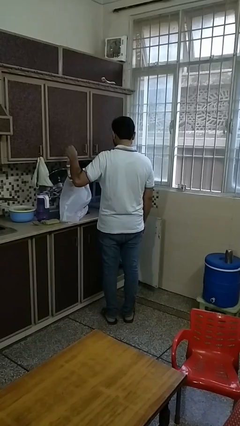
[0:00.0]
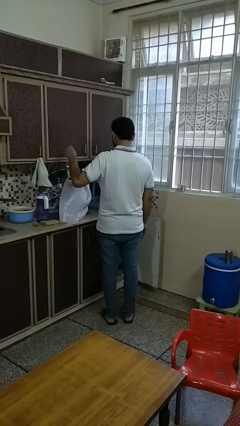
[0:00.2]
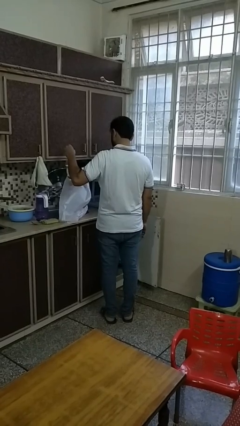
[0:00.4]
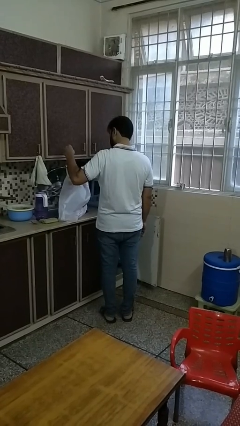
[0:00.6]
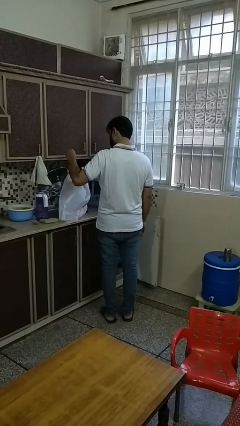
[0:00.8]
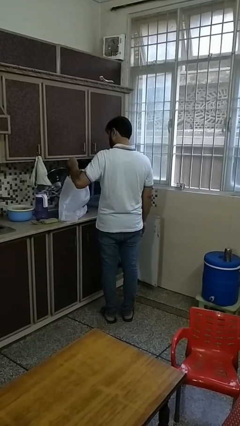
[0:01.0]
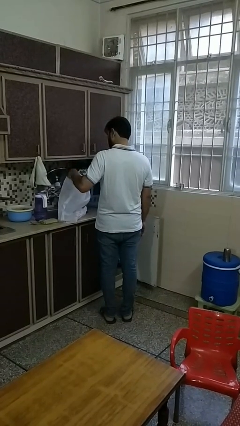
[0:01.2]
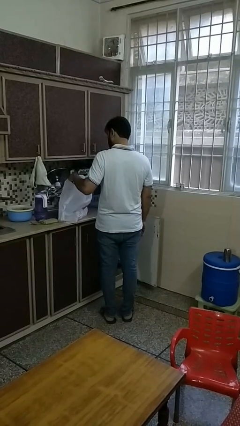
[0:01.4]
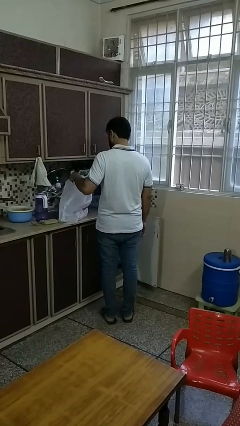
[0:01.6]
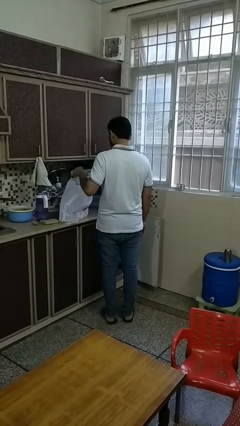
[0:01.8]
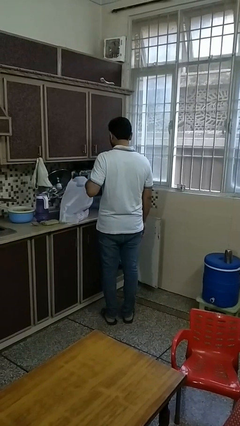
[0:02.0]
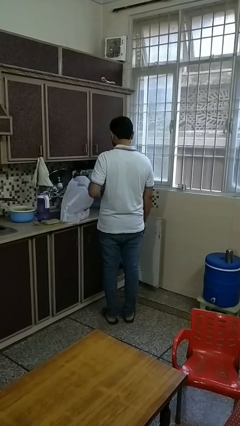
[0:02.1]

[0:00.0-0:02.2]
person puts object into bag

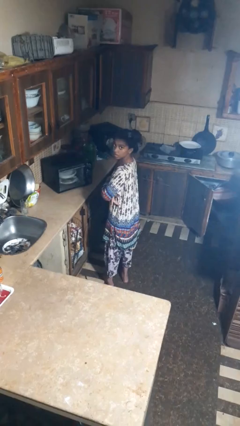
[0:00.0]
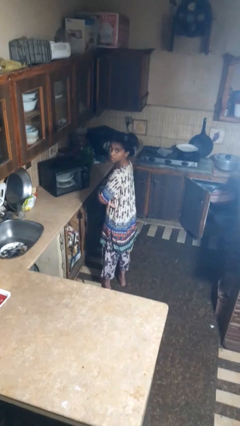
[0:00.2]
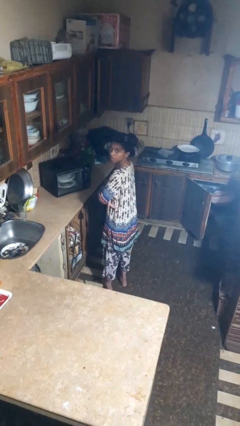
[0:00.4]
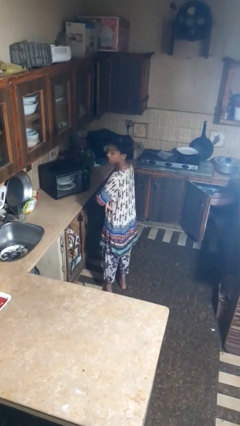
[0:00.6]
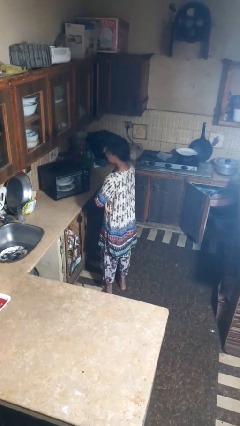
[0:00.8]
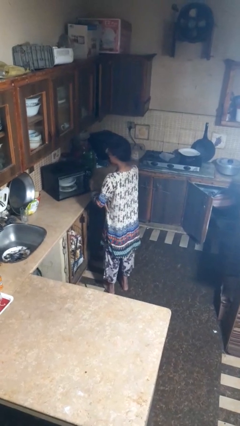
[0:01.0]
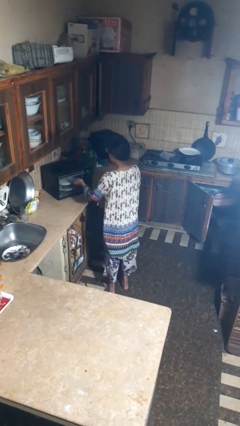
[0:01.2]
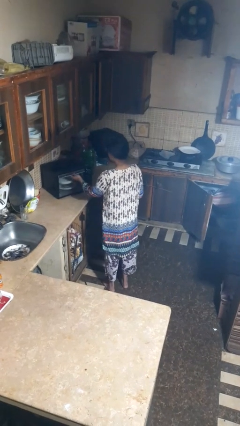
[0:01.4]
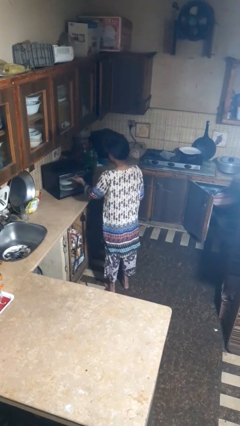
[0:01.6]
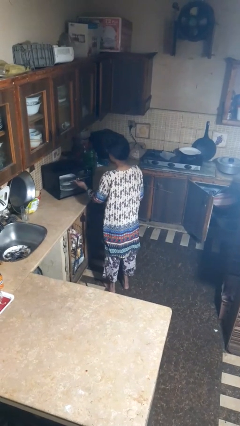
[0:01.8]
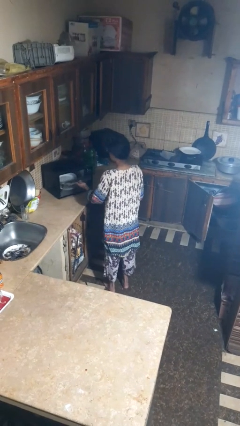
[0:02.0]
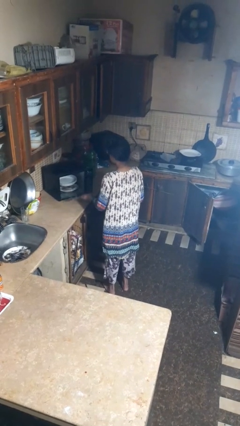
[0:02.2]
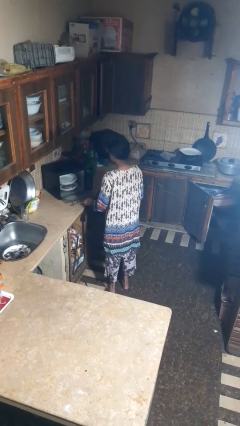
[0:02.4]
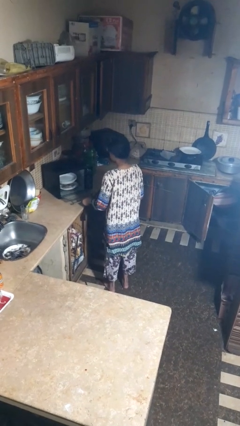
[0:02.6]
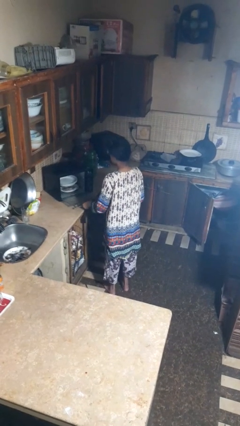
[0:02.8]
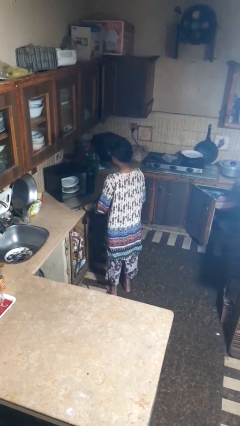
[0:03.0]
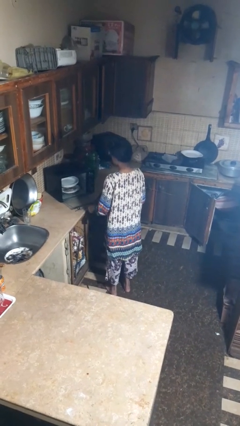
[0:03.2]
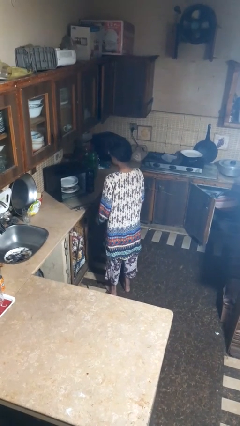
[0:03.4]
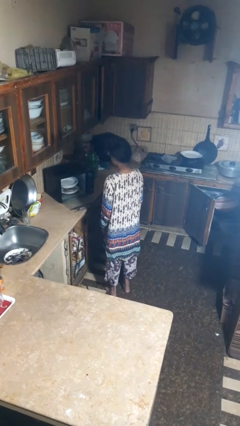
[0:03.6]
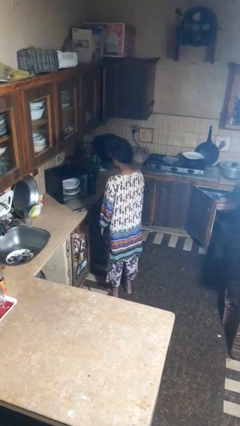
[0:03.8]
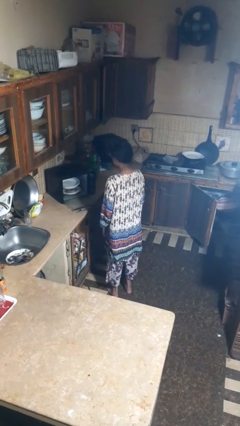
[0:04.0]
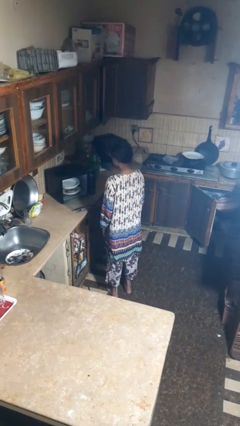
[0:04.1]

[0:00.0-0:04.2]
person opens dishwasher

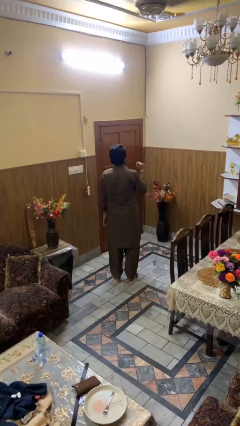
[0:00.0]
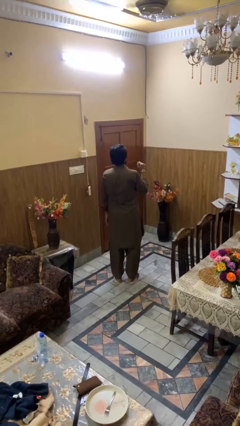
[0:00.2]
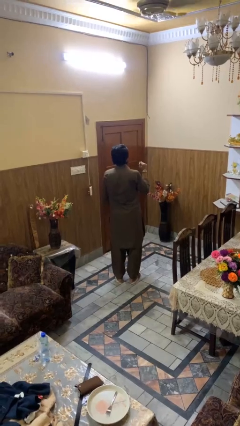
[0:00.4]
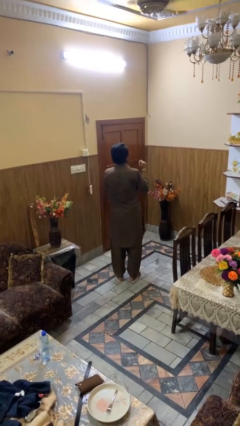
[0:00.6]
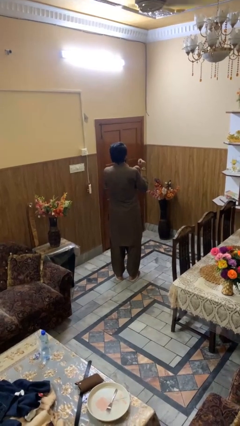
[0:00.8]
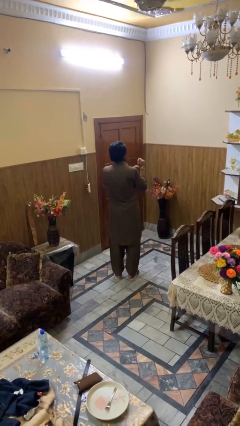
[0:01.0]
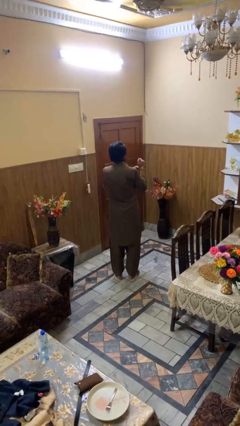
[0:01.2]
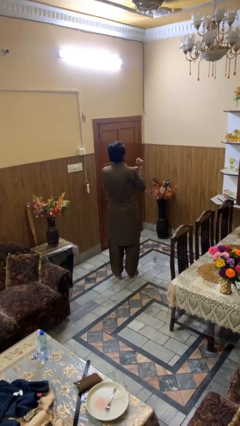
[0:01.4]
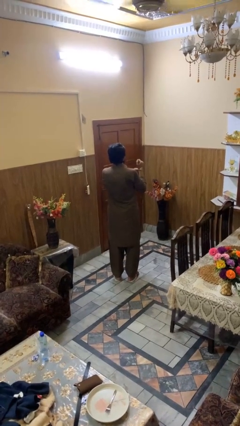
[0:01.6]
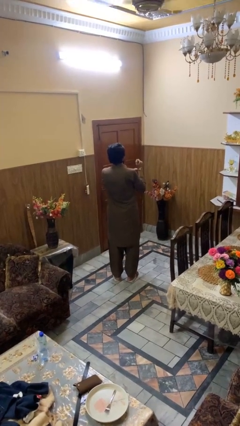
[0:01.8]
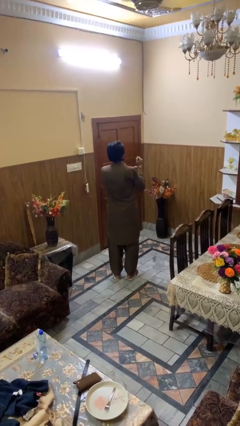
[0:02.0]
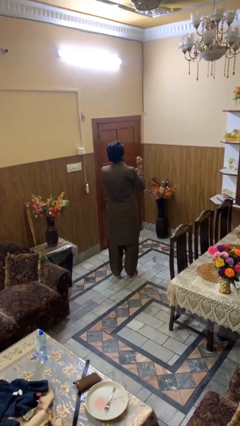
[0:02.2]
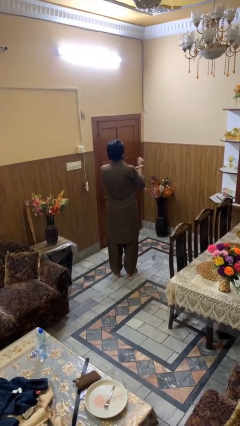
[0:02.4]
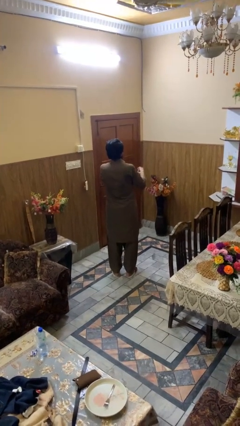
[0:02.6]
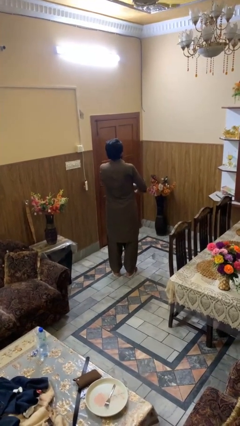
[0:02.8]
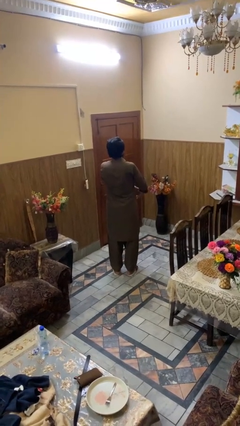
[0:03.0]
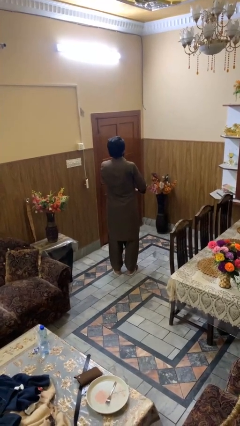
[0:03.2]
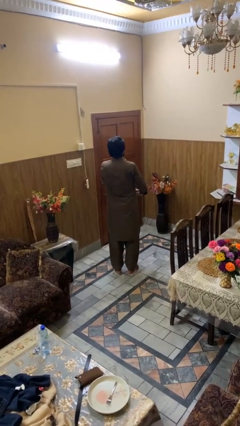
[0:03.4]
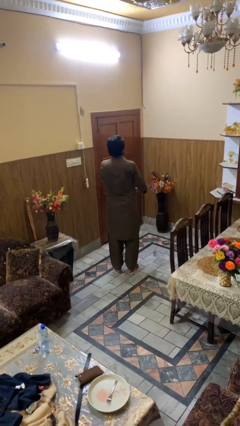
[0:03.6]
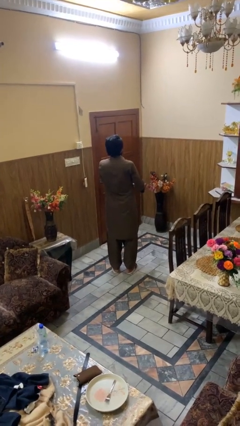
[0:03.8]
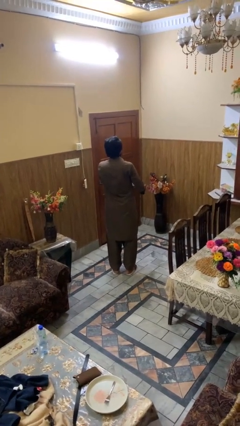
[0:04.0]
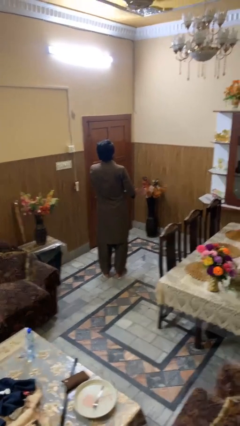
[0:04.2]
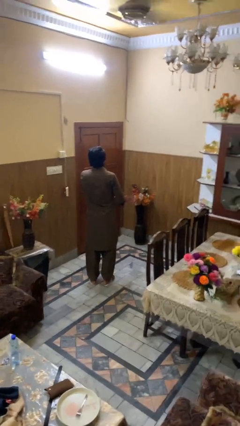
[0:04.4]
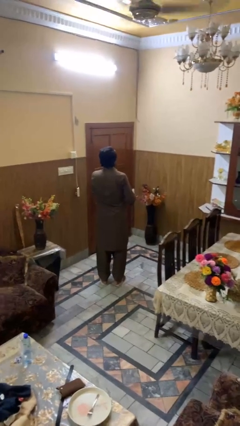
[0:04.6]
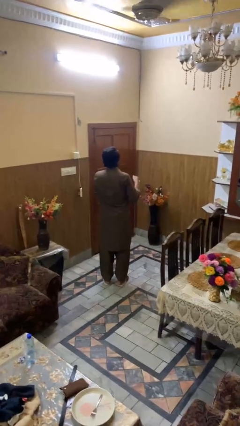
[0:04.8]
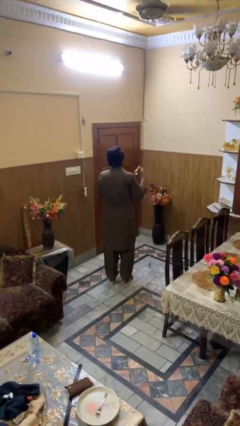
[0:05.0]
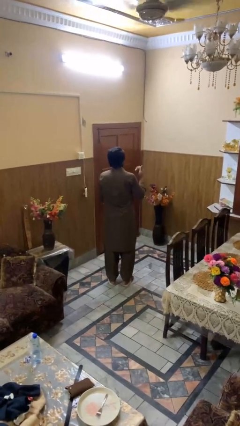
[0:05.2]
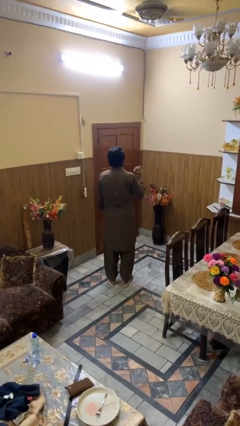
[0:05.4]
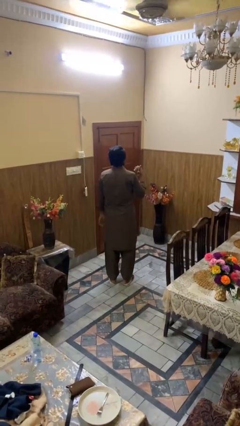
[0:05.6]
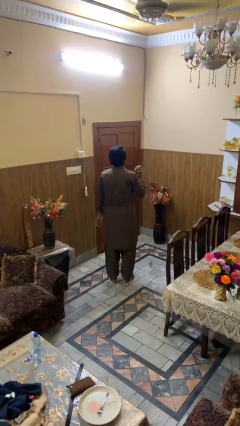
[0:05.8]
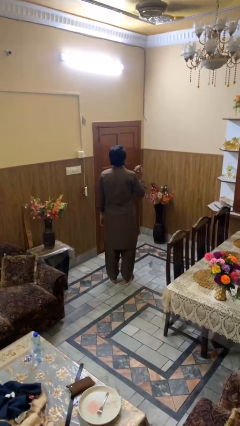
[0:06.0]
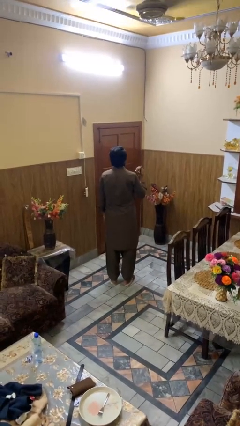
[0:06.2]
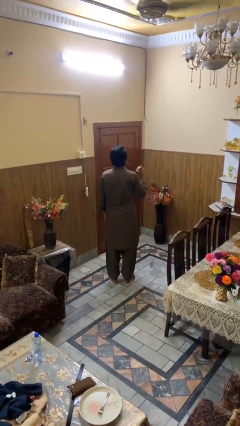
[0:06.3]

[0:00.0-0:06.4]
person takes off wristwatch

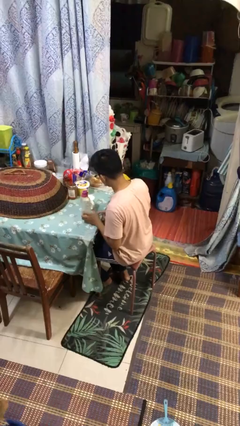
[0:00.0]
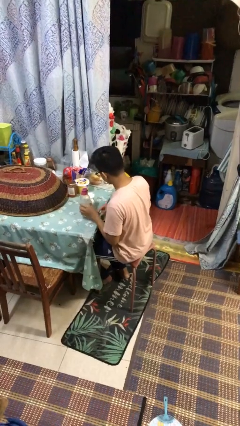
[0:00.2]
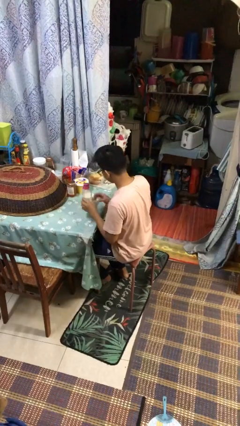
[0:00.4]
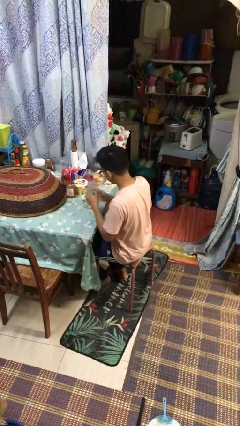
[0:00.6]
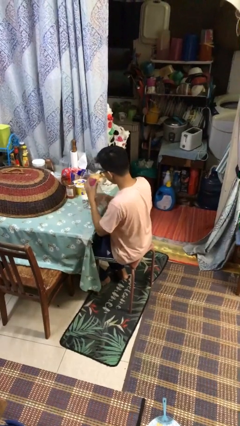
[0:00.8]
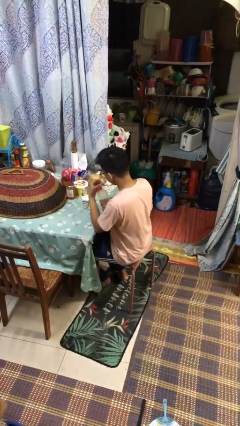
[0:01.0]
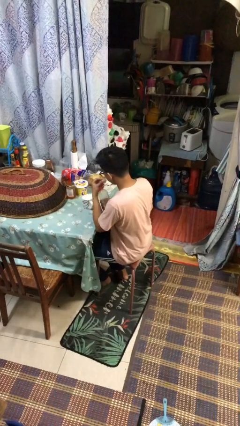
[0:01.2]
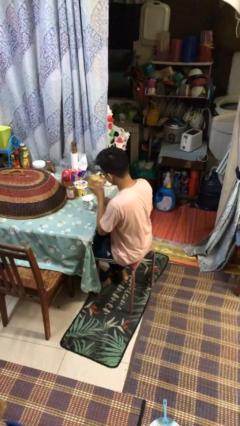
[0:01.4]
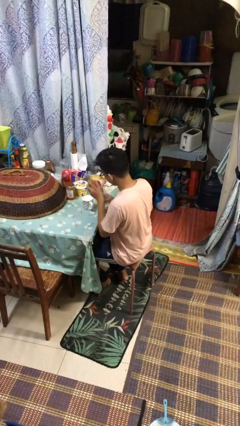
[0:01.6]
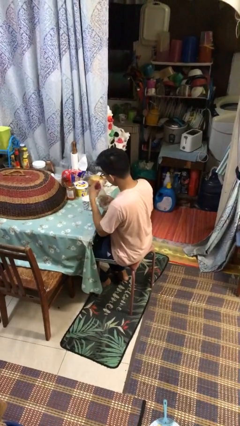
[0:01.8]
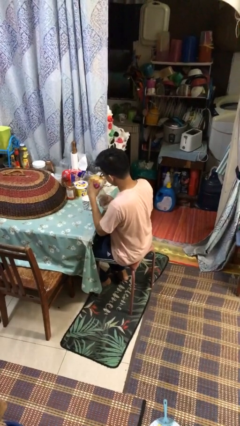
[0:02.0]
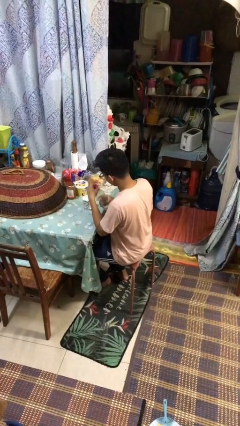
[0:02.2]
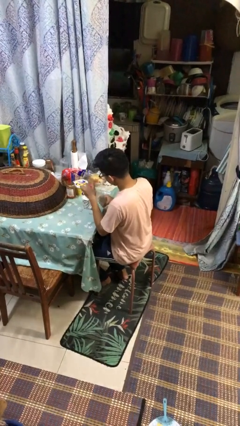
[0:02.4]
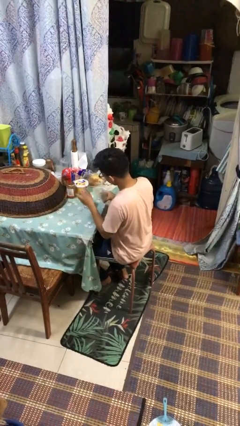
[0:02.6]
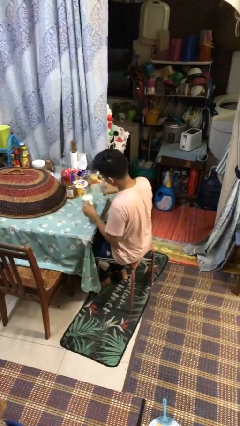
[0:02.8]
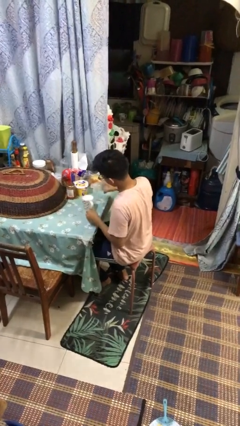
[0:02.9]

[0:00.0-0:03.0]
person unscrews lid from bottle

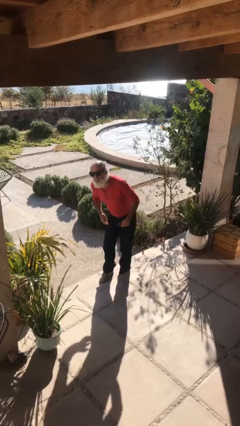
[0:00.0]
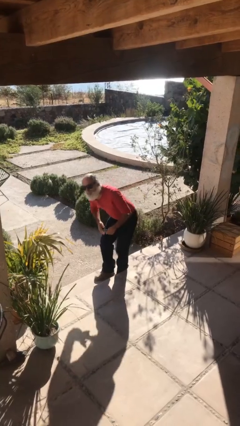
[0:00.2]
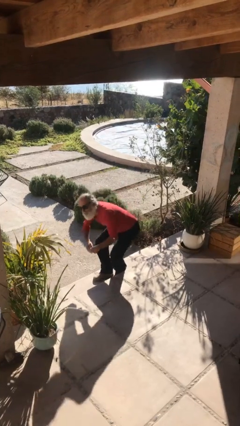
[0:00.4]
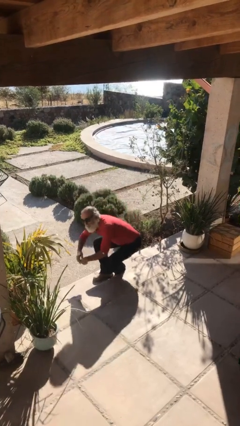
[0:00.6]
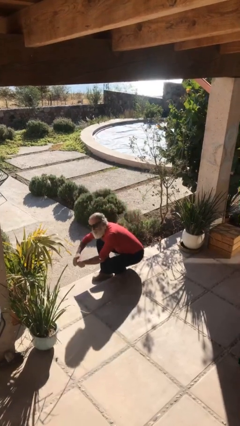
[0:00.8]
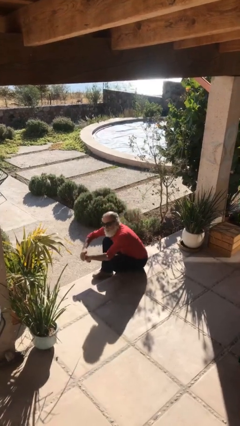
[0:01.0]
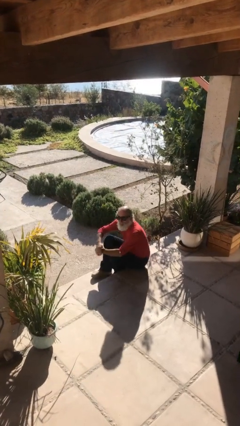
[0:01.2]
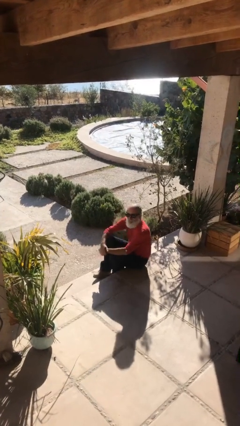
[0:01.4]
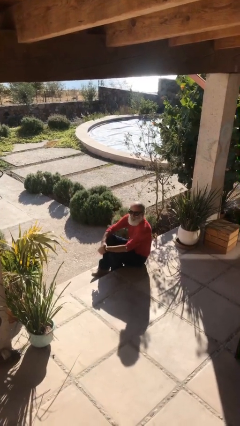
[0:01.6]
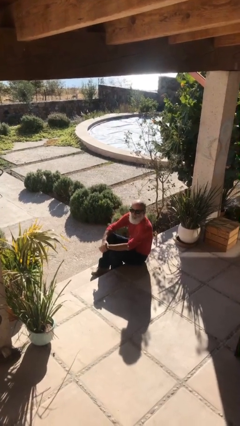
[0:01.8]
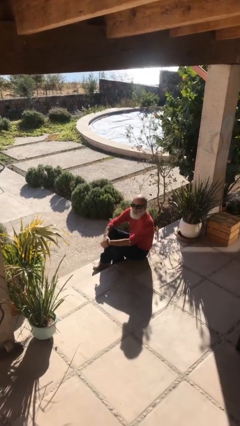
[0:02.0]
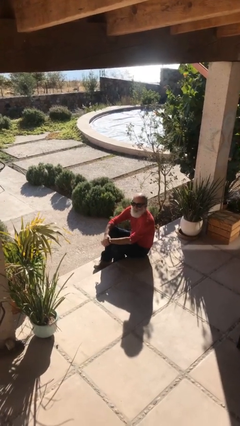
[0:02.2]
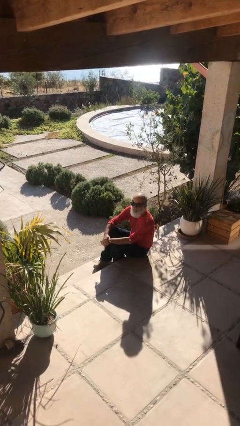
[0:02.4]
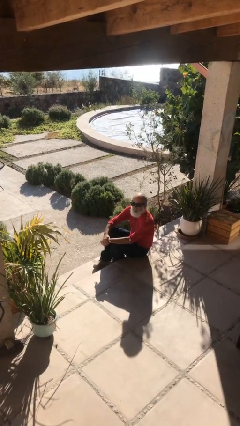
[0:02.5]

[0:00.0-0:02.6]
person sits down
